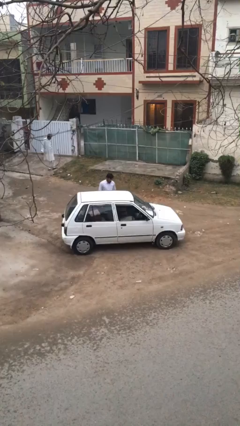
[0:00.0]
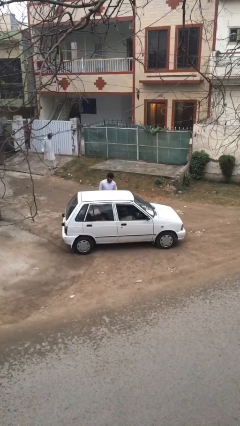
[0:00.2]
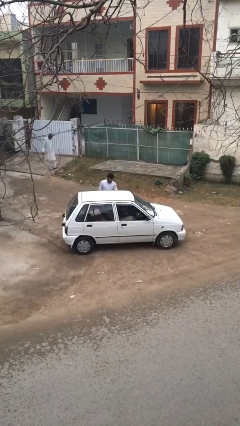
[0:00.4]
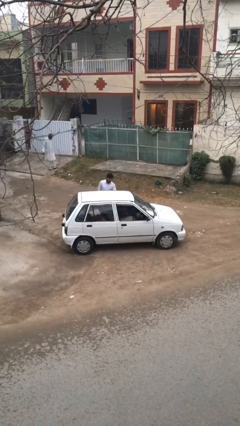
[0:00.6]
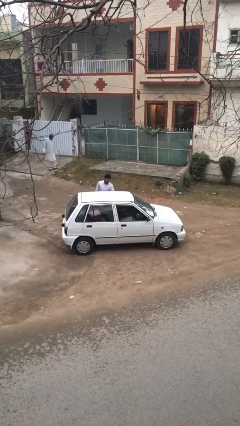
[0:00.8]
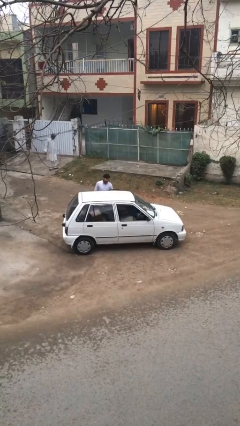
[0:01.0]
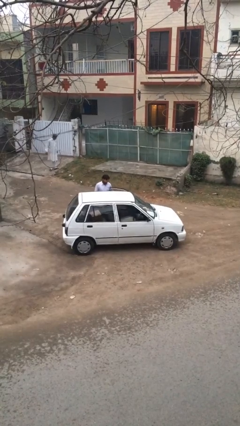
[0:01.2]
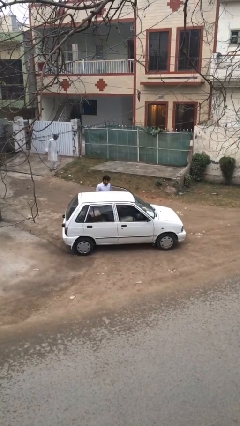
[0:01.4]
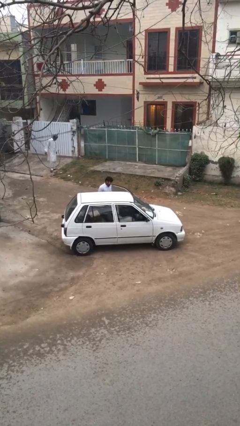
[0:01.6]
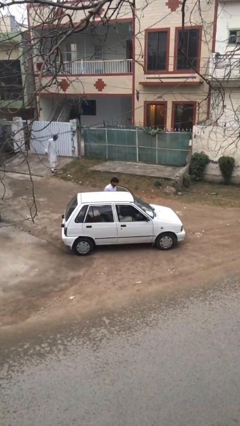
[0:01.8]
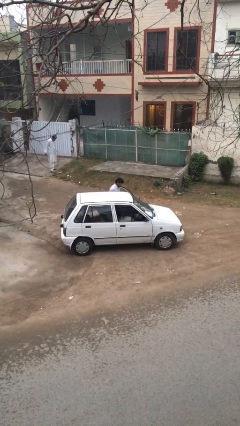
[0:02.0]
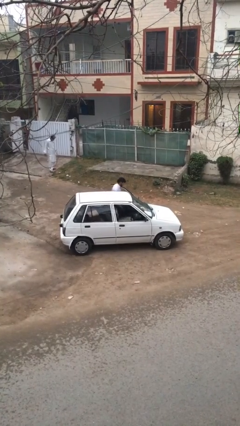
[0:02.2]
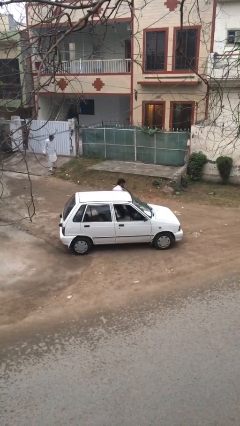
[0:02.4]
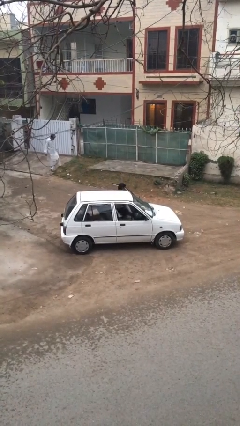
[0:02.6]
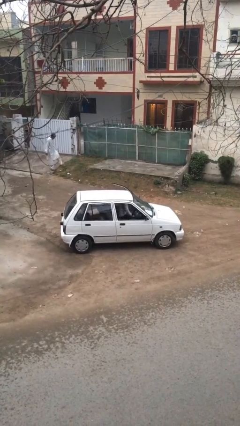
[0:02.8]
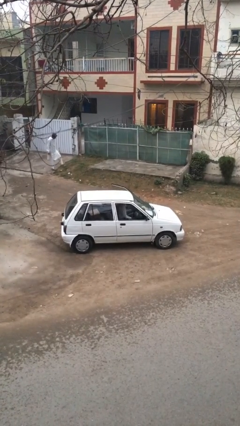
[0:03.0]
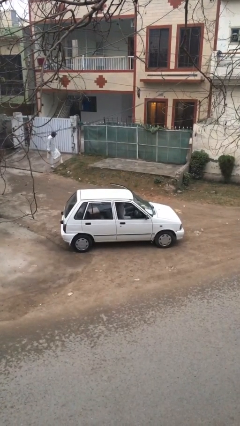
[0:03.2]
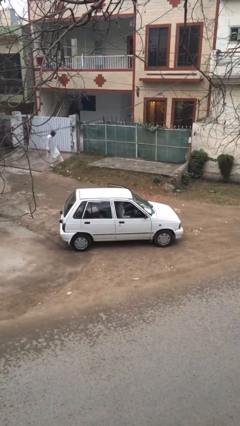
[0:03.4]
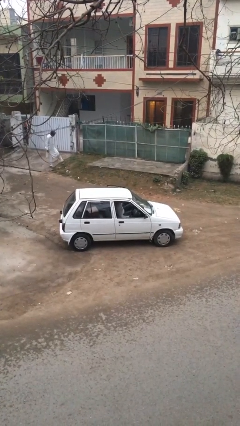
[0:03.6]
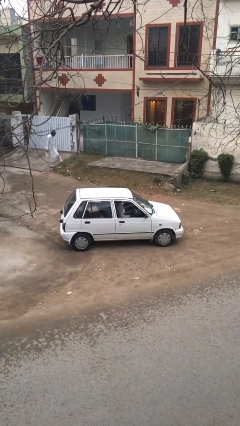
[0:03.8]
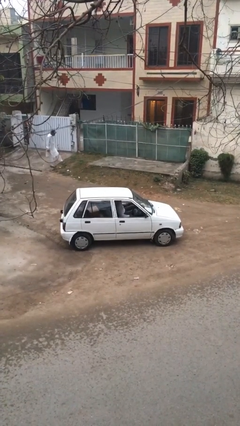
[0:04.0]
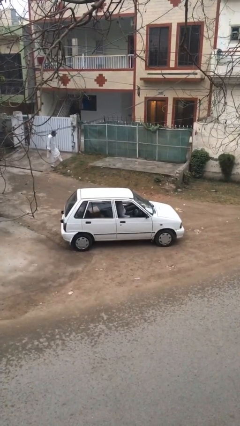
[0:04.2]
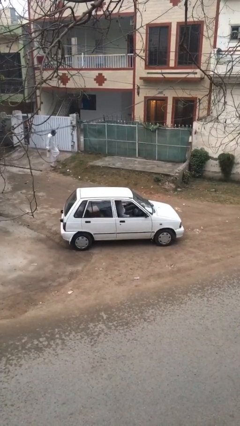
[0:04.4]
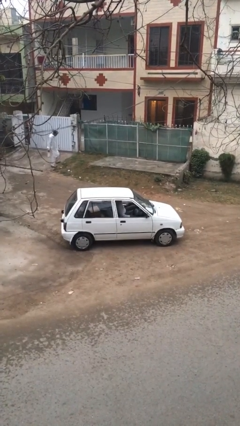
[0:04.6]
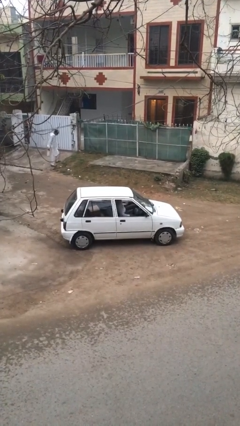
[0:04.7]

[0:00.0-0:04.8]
car picks up person

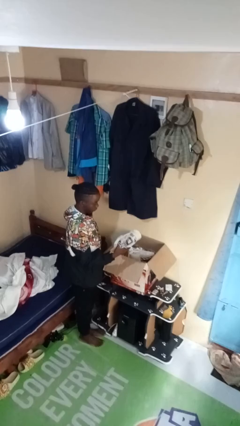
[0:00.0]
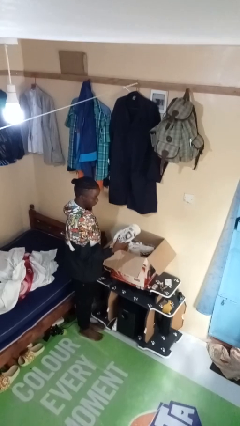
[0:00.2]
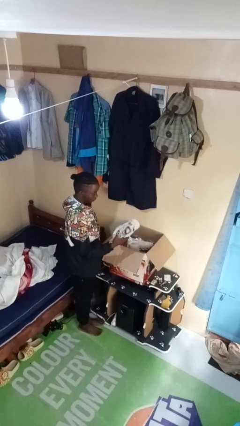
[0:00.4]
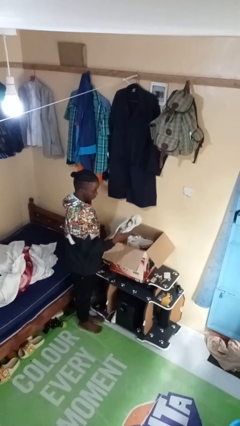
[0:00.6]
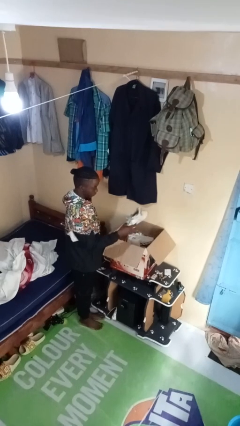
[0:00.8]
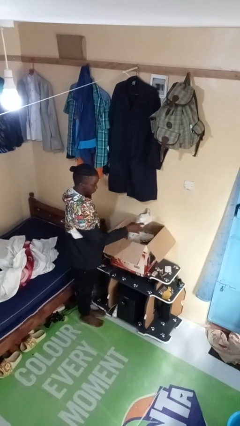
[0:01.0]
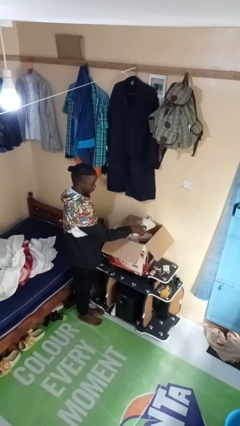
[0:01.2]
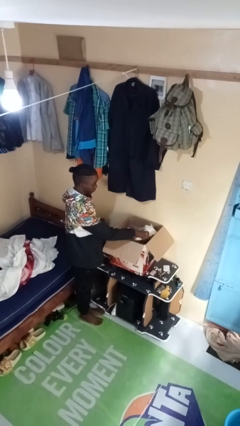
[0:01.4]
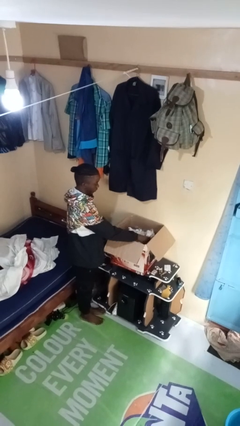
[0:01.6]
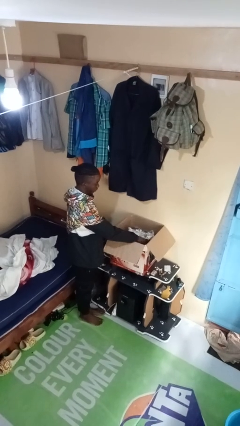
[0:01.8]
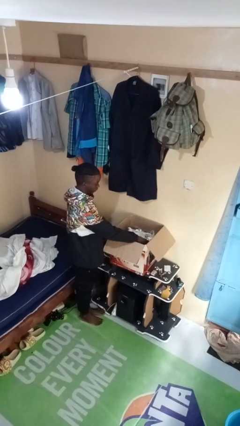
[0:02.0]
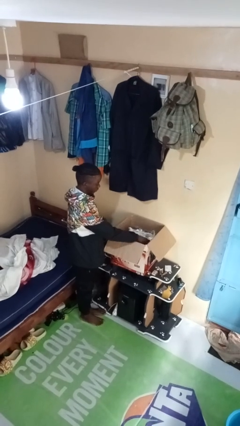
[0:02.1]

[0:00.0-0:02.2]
person puts object into box

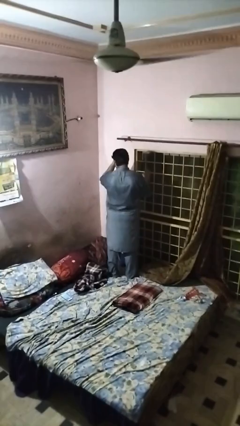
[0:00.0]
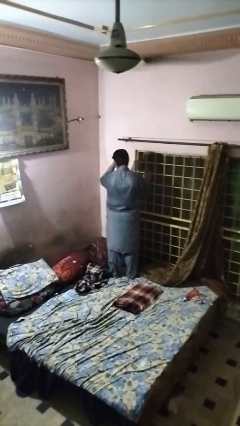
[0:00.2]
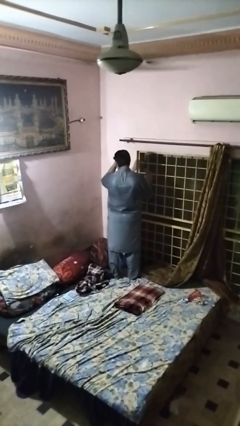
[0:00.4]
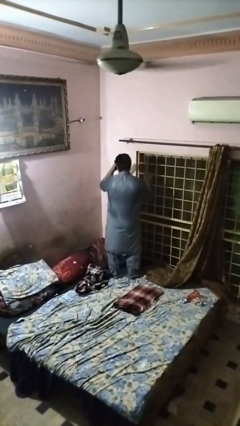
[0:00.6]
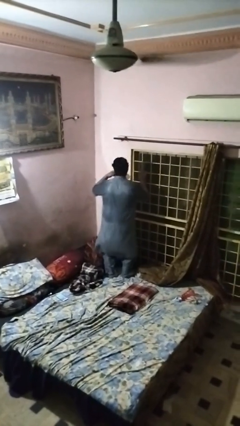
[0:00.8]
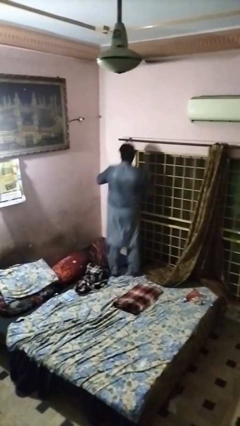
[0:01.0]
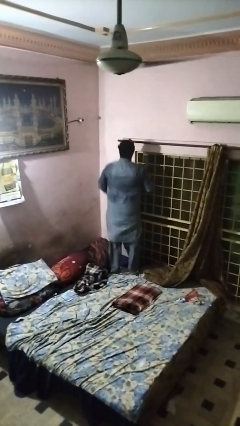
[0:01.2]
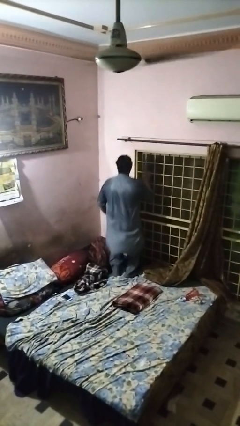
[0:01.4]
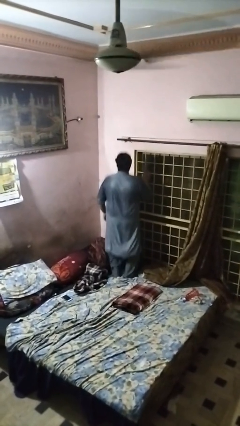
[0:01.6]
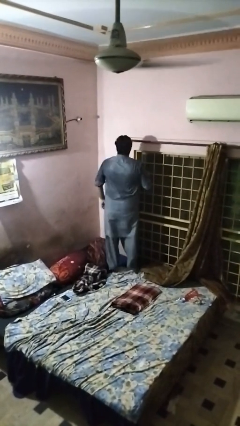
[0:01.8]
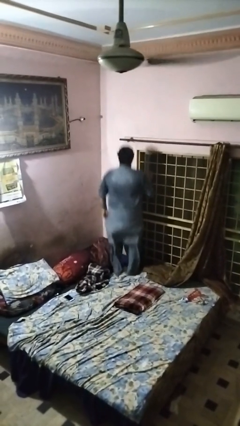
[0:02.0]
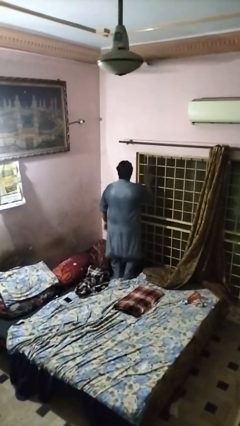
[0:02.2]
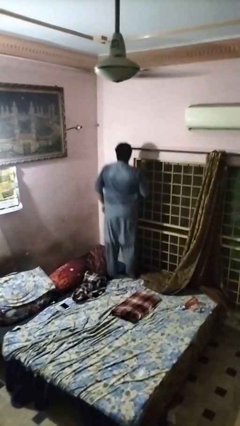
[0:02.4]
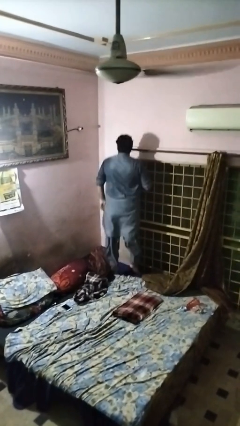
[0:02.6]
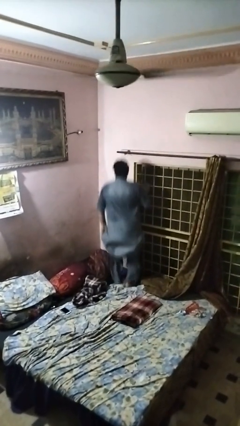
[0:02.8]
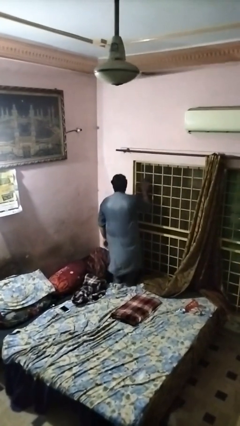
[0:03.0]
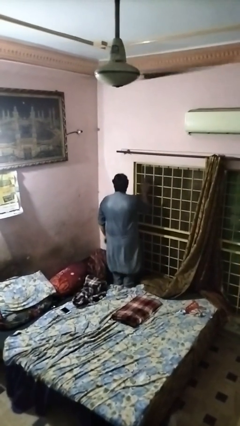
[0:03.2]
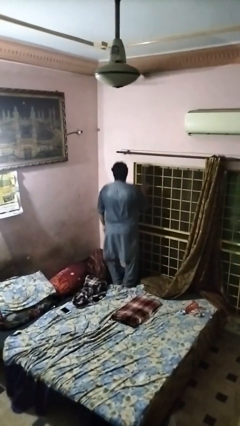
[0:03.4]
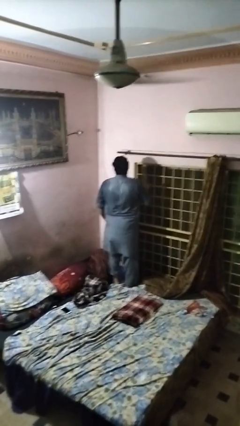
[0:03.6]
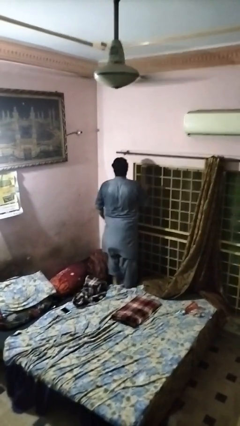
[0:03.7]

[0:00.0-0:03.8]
person jumps on bed

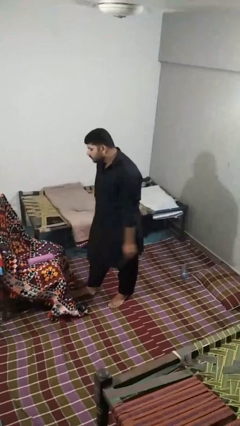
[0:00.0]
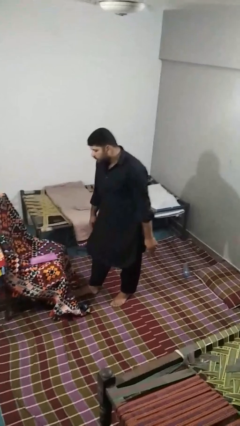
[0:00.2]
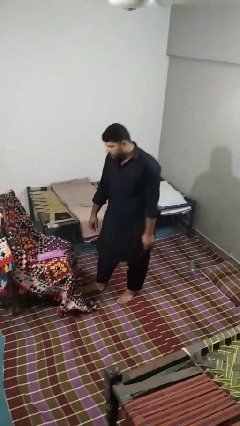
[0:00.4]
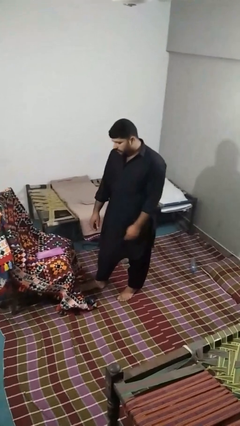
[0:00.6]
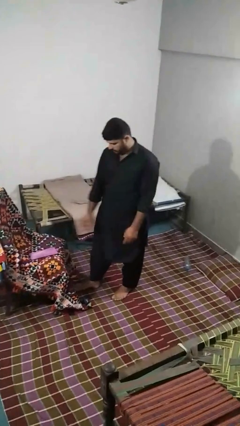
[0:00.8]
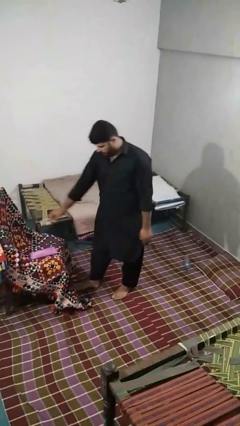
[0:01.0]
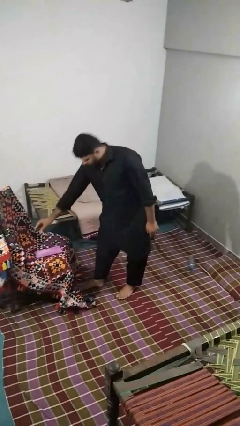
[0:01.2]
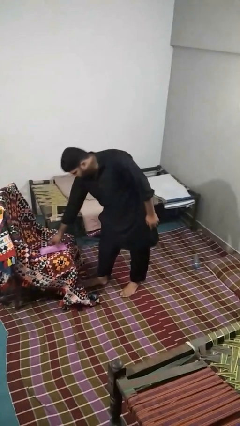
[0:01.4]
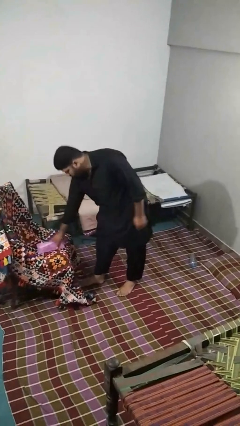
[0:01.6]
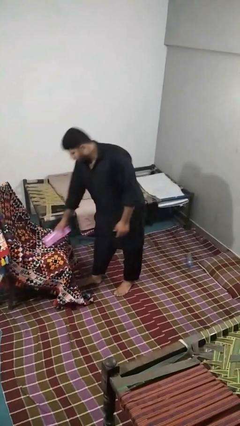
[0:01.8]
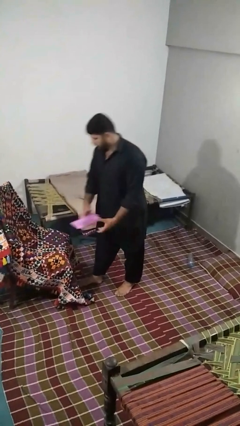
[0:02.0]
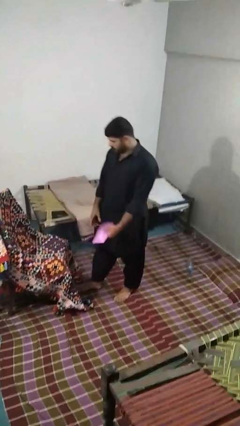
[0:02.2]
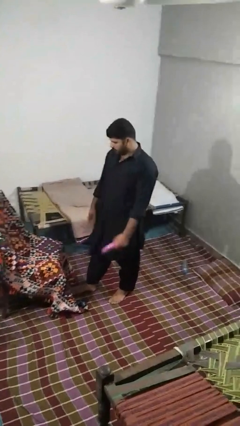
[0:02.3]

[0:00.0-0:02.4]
person picks up object from couch

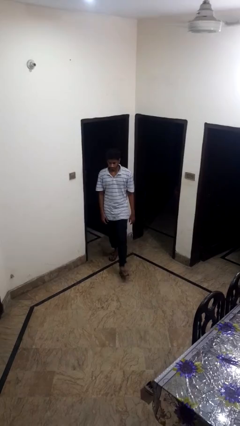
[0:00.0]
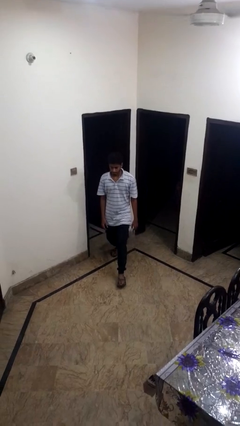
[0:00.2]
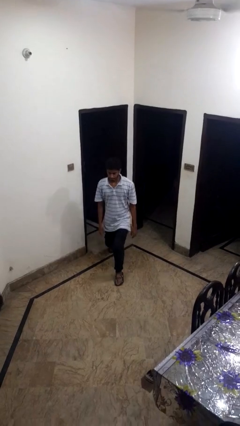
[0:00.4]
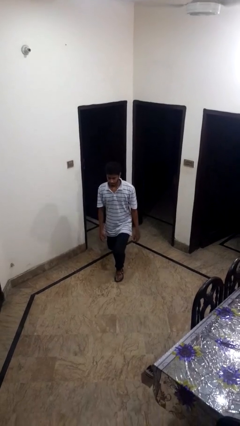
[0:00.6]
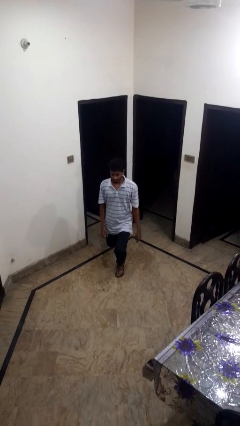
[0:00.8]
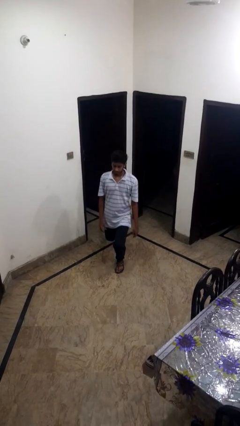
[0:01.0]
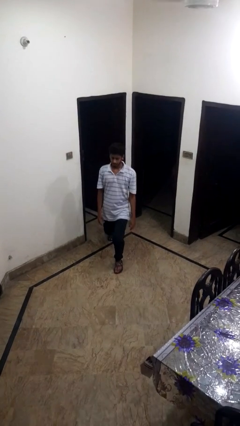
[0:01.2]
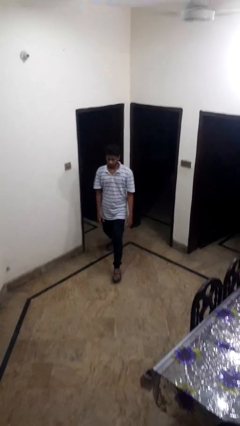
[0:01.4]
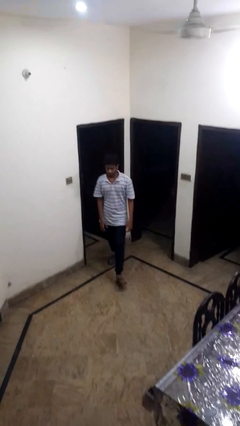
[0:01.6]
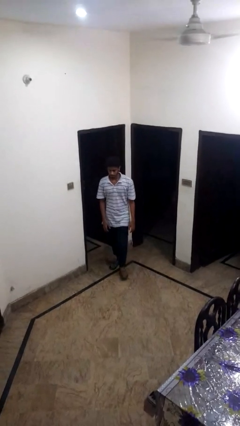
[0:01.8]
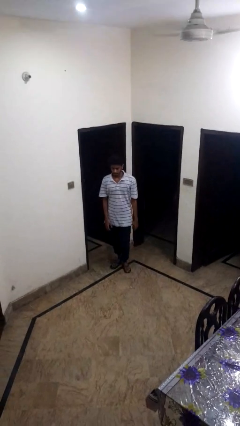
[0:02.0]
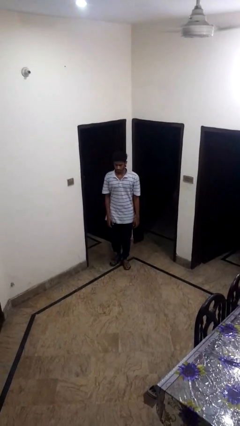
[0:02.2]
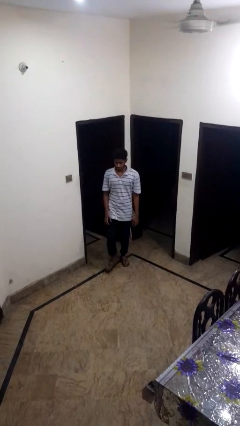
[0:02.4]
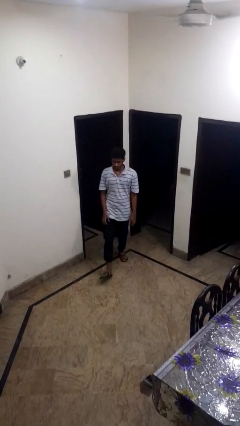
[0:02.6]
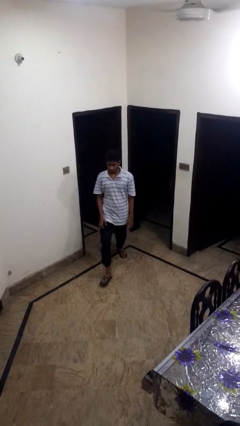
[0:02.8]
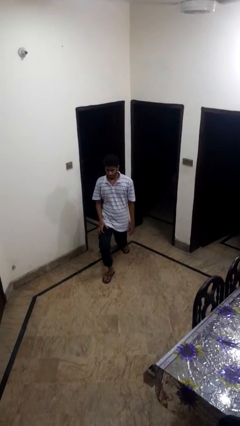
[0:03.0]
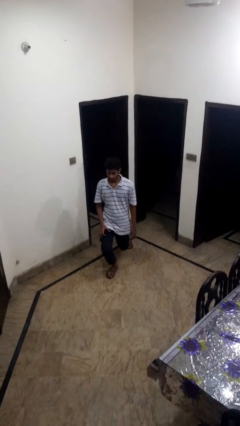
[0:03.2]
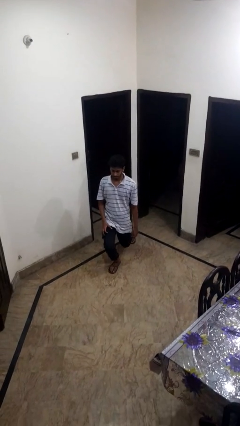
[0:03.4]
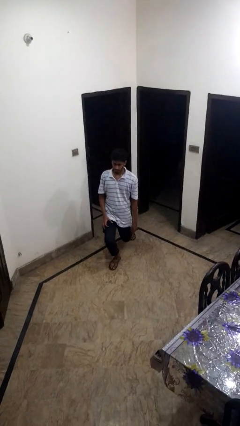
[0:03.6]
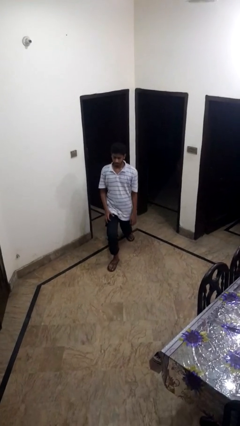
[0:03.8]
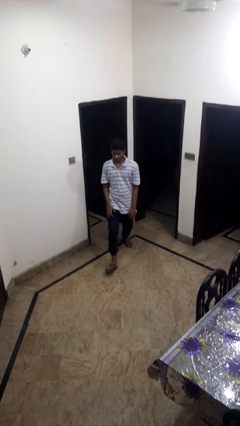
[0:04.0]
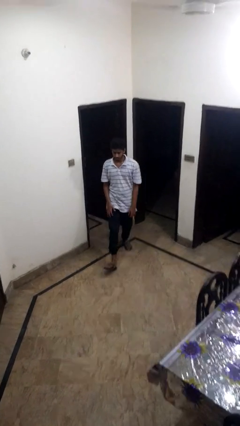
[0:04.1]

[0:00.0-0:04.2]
person exercises with lunges

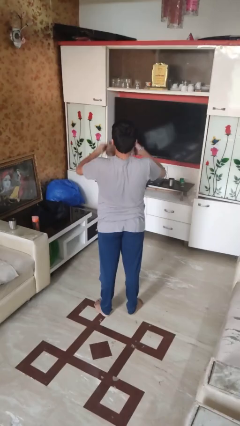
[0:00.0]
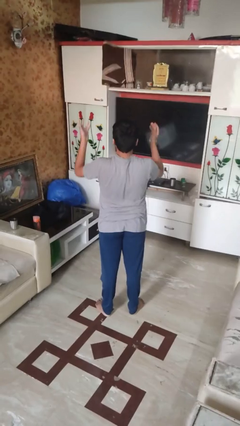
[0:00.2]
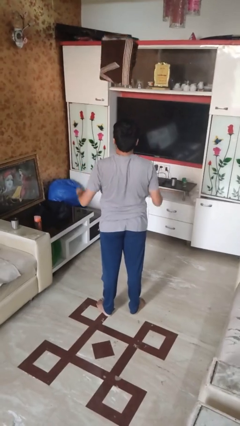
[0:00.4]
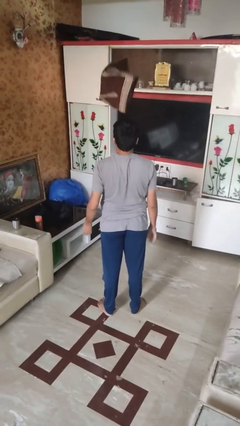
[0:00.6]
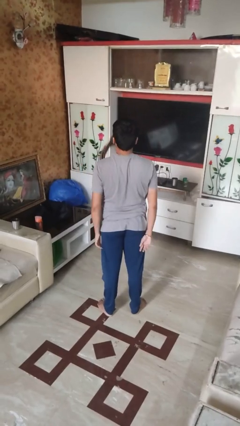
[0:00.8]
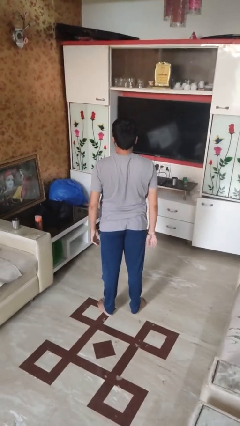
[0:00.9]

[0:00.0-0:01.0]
person throws object into air
